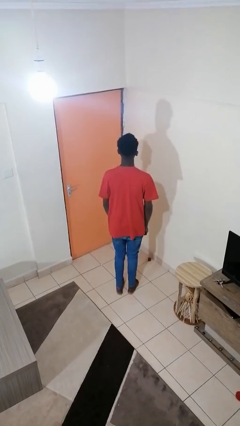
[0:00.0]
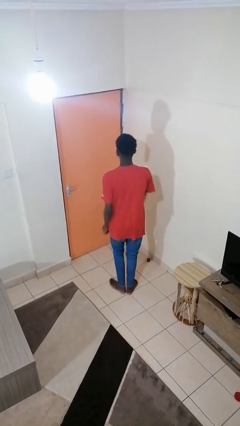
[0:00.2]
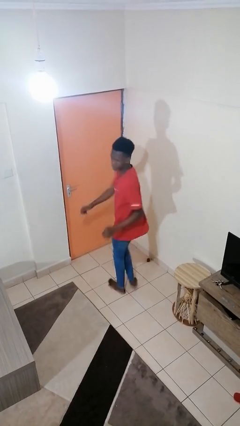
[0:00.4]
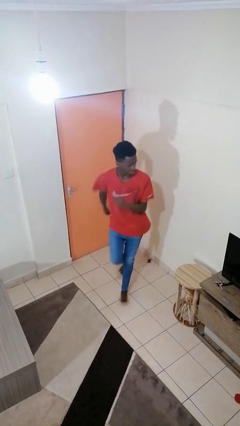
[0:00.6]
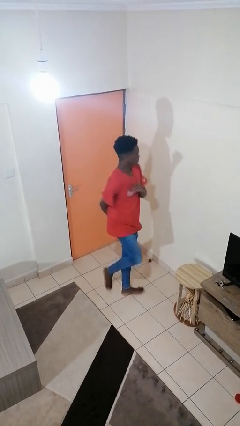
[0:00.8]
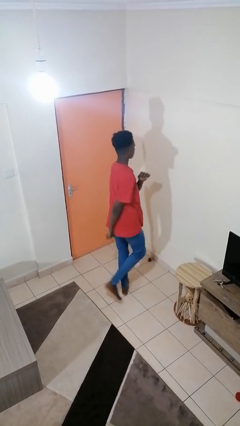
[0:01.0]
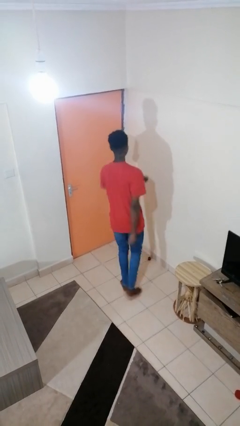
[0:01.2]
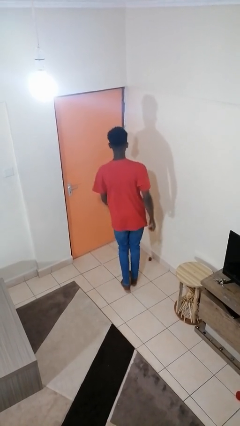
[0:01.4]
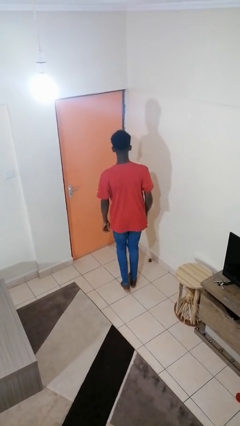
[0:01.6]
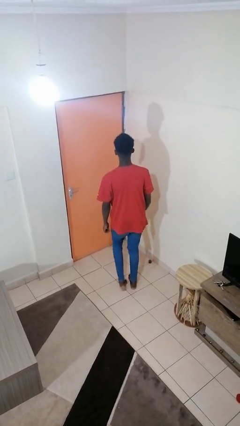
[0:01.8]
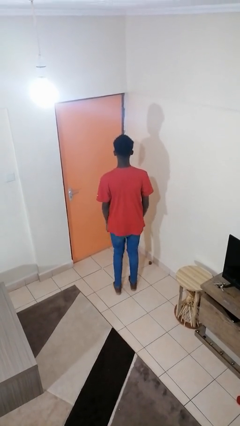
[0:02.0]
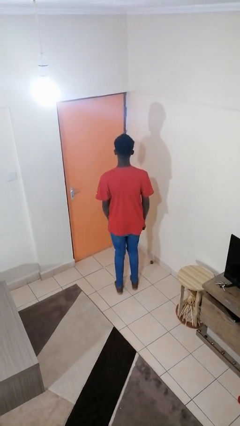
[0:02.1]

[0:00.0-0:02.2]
person twirls

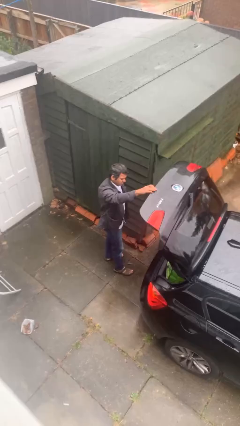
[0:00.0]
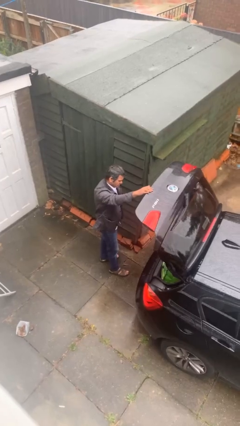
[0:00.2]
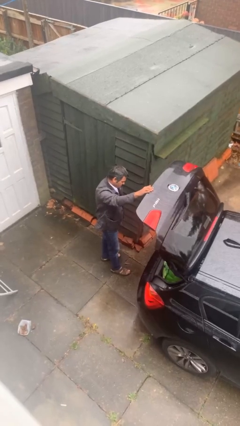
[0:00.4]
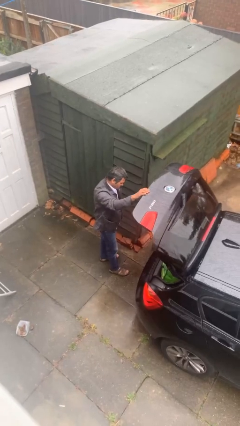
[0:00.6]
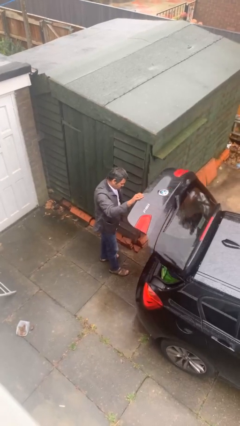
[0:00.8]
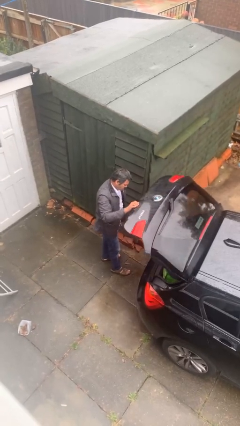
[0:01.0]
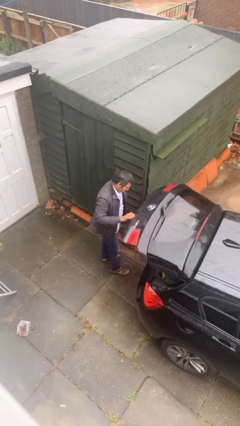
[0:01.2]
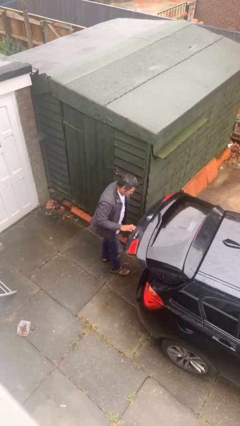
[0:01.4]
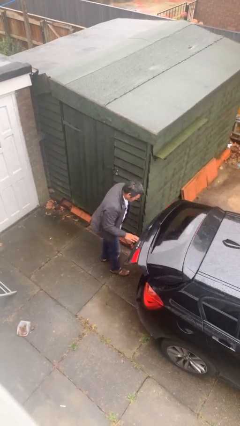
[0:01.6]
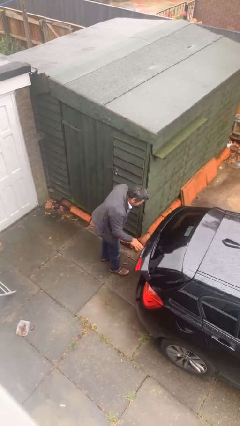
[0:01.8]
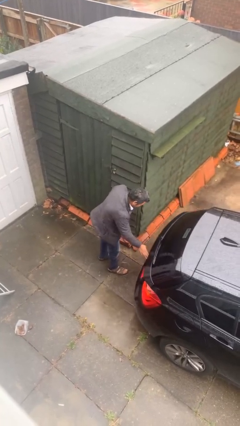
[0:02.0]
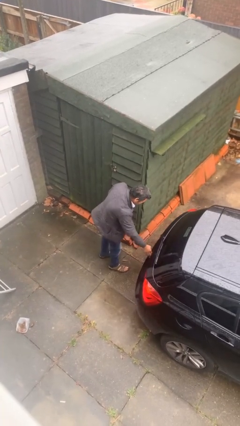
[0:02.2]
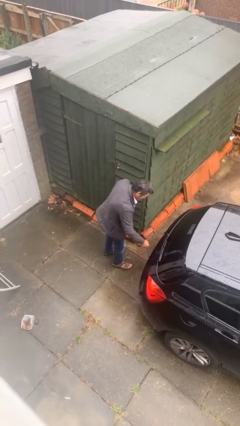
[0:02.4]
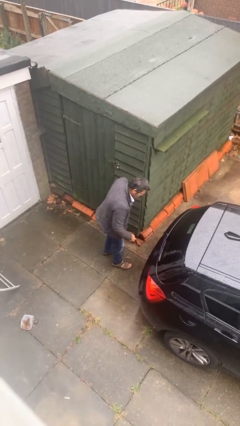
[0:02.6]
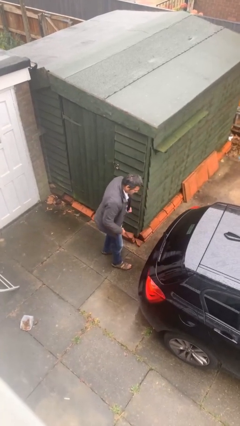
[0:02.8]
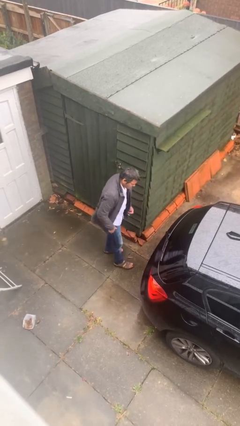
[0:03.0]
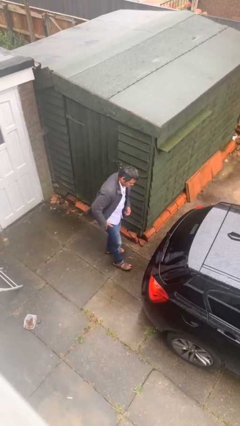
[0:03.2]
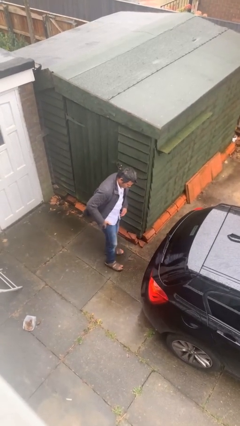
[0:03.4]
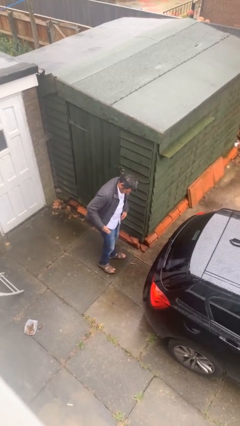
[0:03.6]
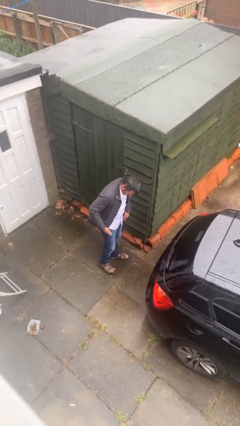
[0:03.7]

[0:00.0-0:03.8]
person closes car trunk

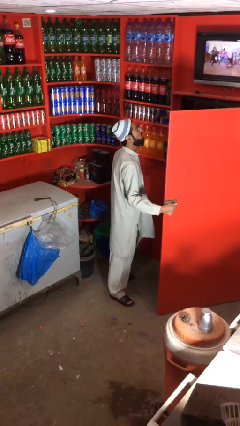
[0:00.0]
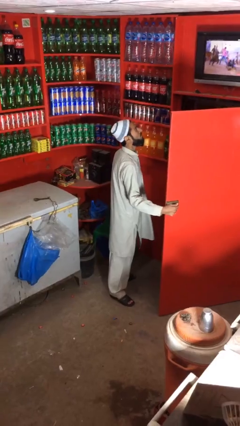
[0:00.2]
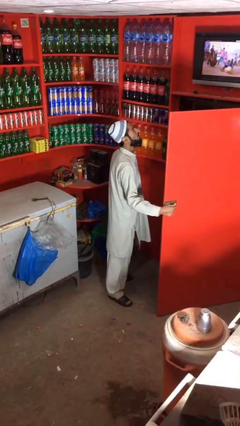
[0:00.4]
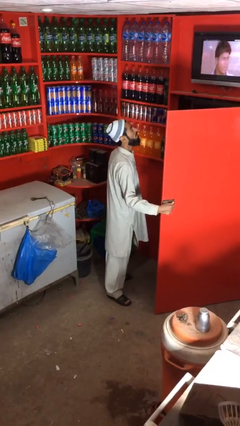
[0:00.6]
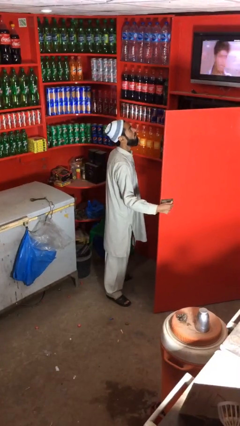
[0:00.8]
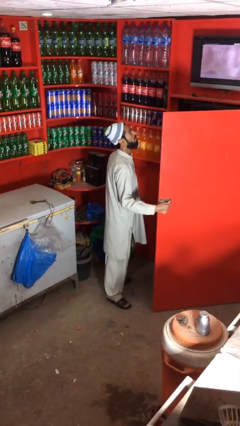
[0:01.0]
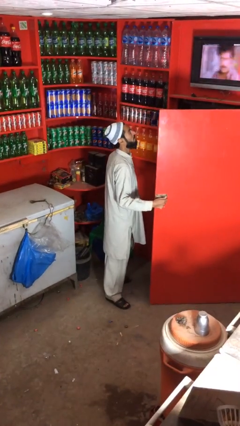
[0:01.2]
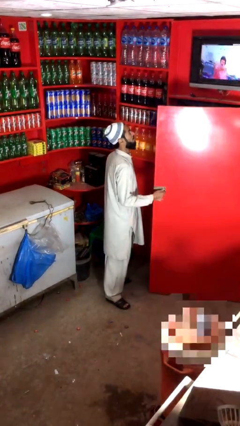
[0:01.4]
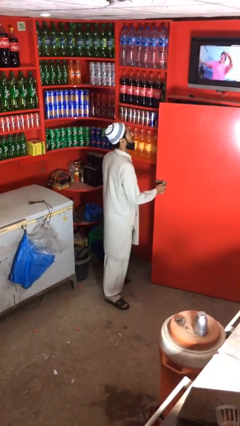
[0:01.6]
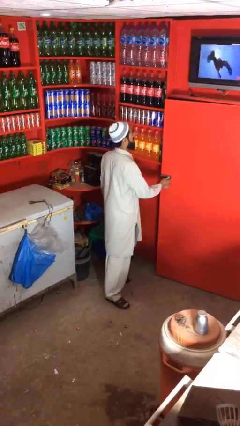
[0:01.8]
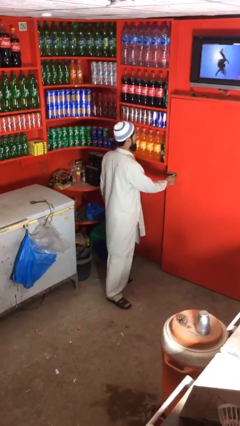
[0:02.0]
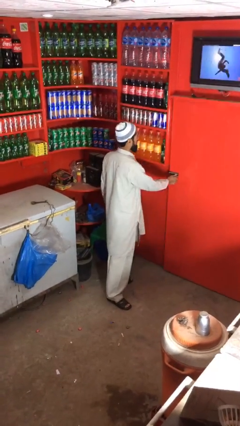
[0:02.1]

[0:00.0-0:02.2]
person closes facility door

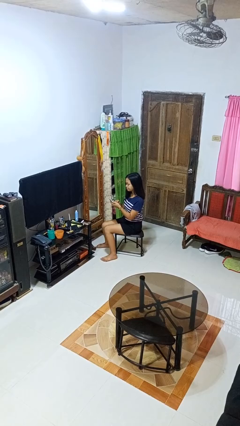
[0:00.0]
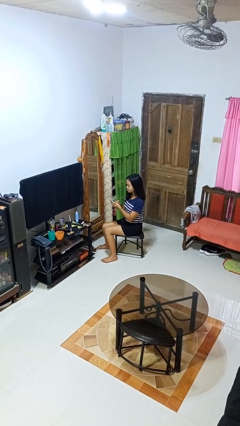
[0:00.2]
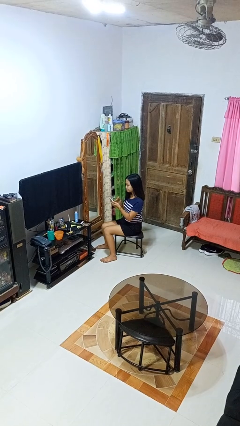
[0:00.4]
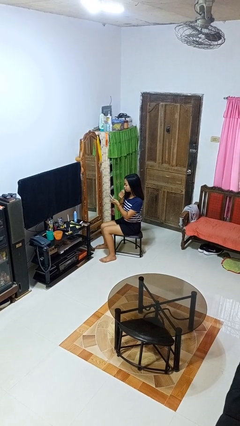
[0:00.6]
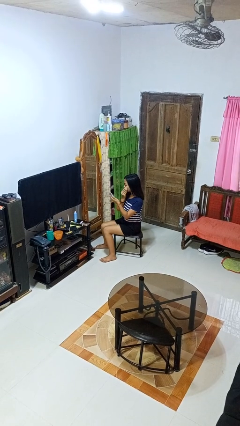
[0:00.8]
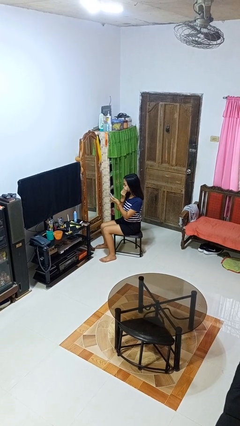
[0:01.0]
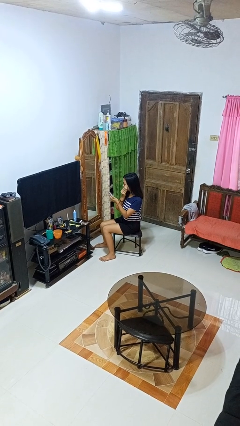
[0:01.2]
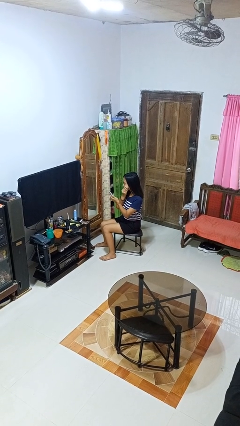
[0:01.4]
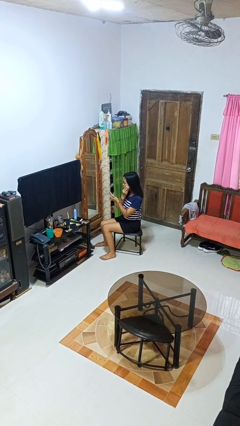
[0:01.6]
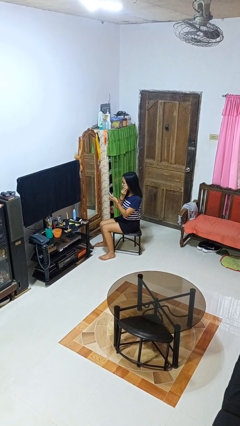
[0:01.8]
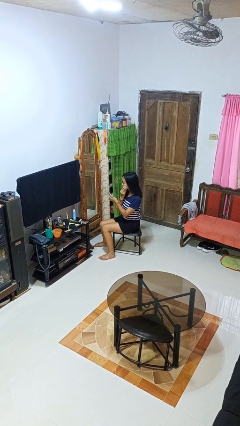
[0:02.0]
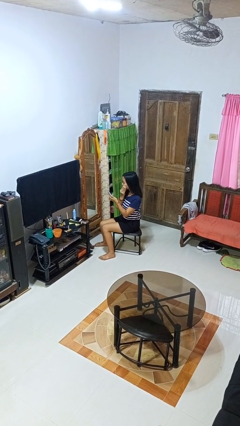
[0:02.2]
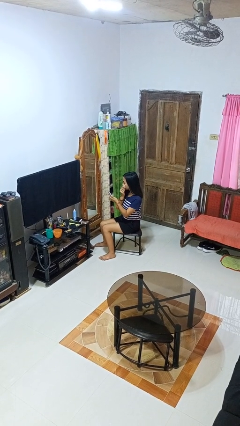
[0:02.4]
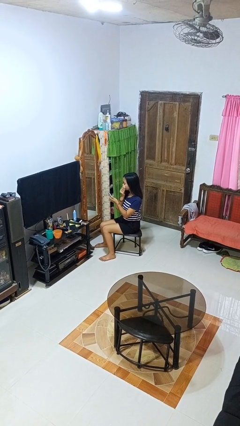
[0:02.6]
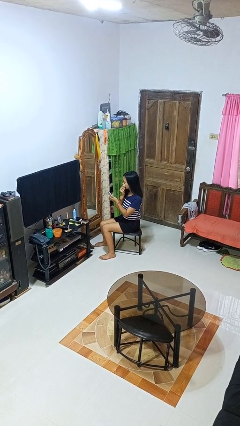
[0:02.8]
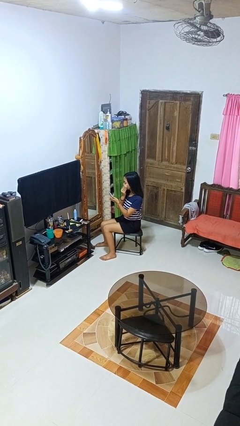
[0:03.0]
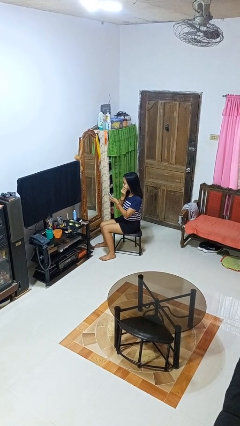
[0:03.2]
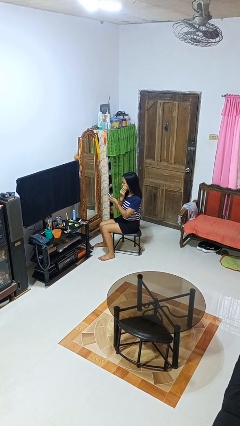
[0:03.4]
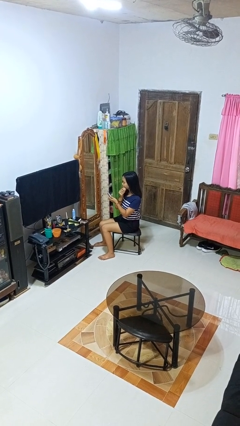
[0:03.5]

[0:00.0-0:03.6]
person applies foundation makeup

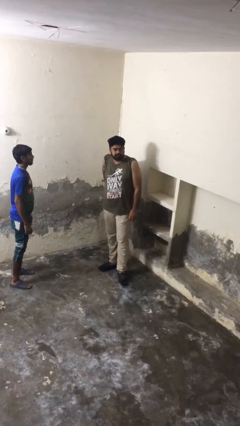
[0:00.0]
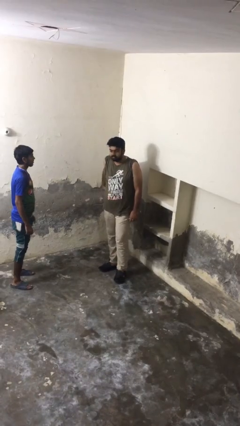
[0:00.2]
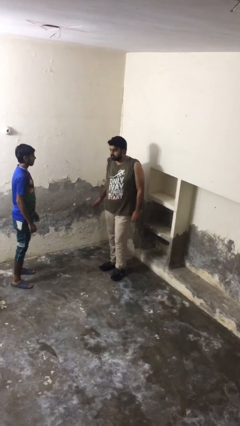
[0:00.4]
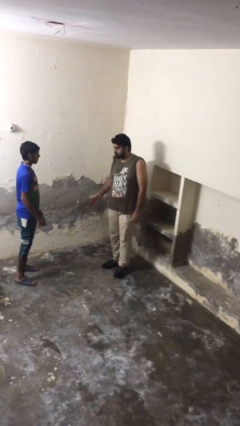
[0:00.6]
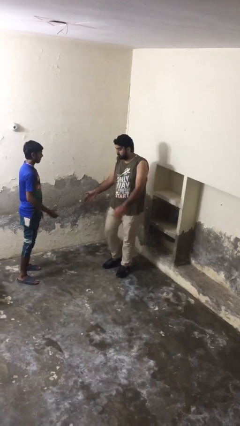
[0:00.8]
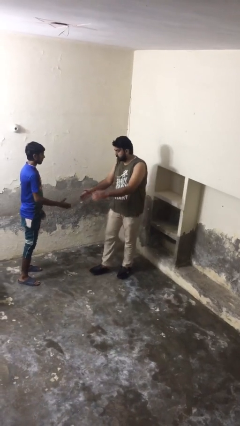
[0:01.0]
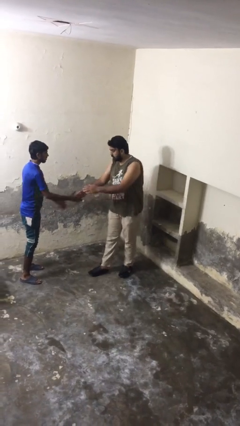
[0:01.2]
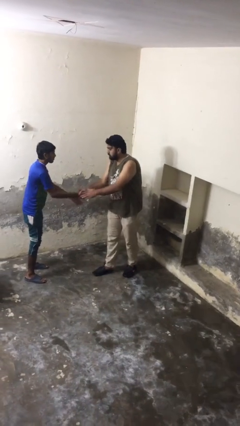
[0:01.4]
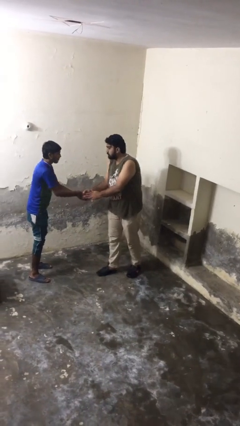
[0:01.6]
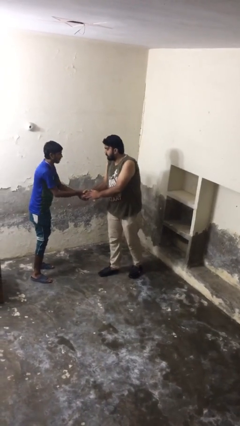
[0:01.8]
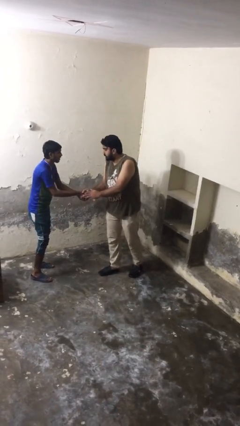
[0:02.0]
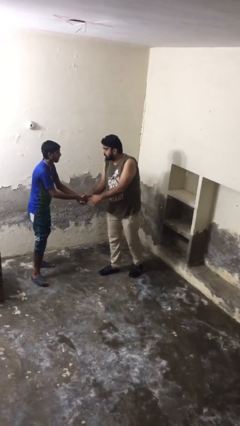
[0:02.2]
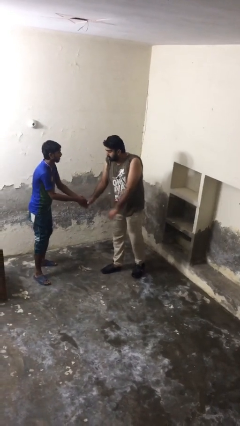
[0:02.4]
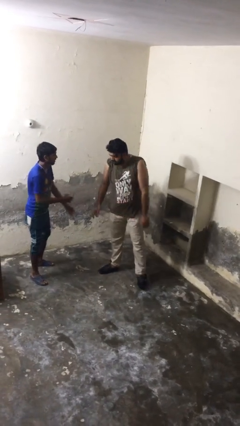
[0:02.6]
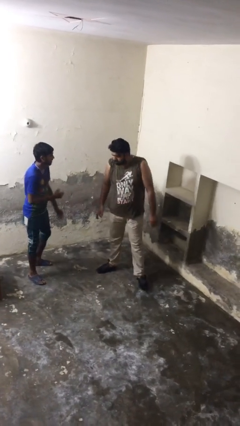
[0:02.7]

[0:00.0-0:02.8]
person shakes hand

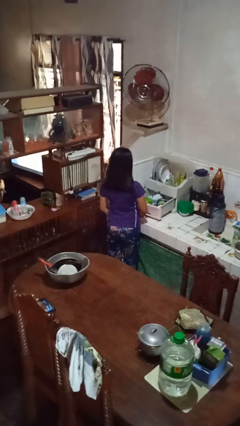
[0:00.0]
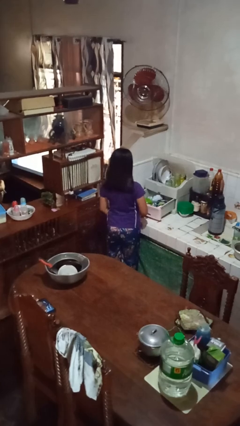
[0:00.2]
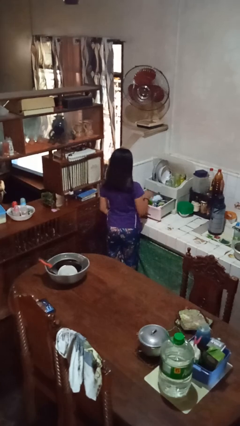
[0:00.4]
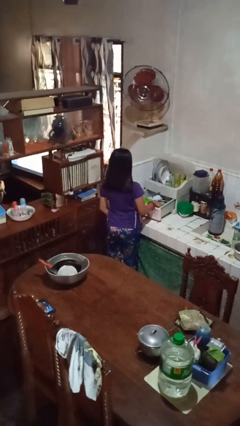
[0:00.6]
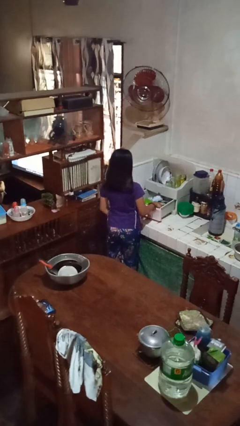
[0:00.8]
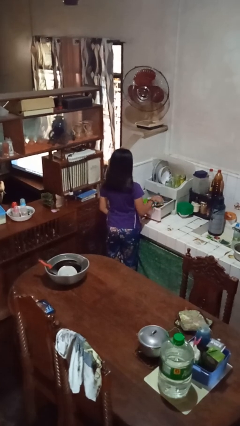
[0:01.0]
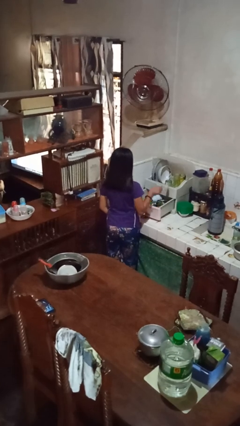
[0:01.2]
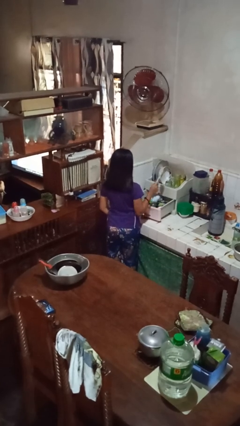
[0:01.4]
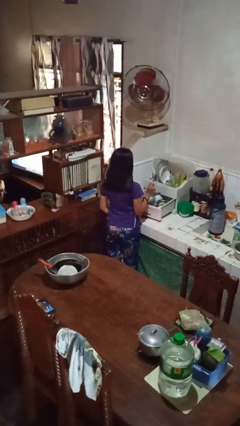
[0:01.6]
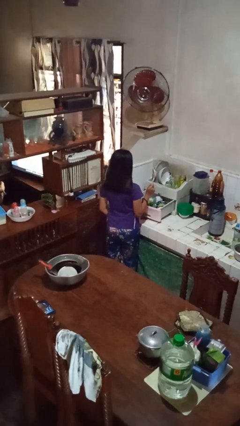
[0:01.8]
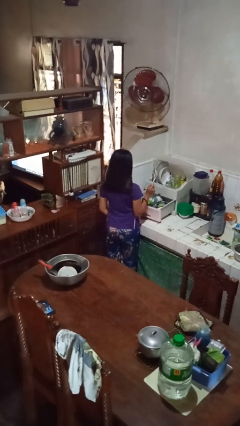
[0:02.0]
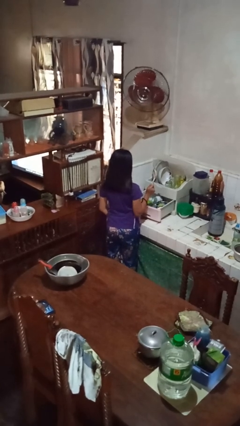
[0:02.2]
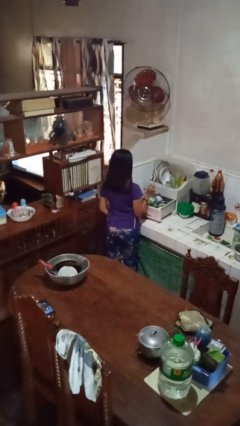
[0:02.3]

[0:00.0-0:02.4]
person takes object from kitchen drawer
